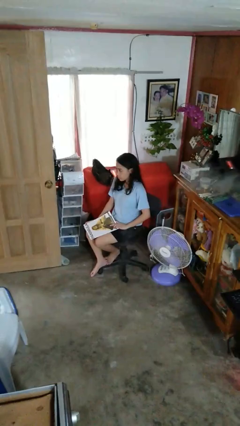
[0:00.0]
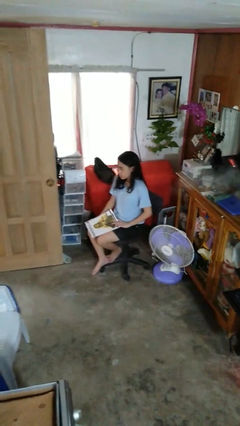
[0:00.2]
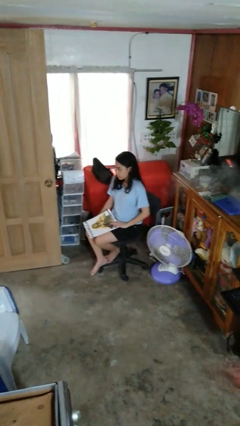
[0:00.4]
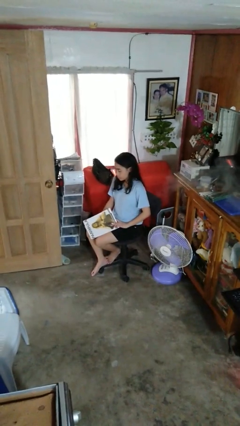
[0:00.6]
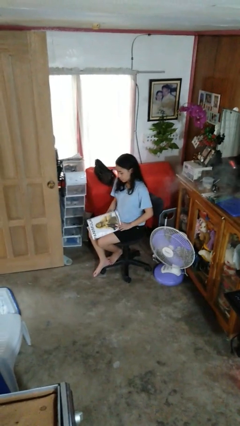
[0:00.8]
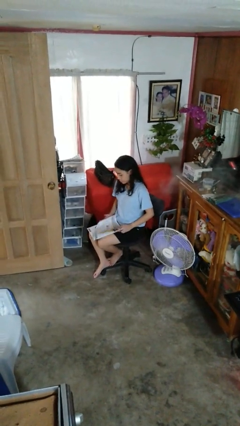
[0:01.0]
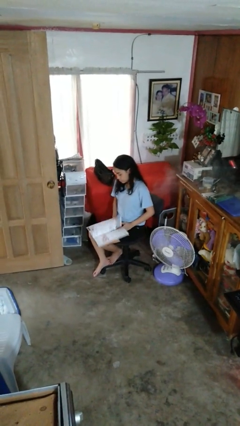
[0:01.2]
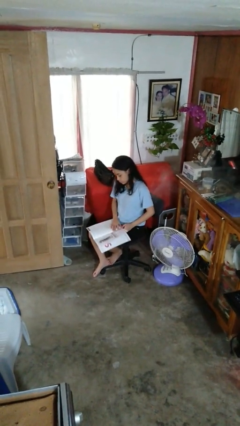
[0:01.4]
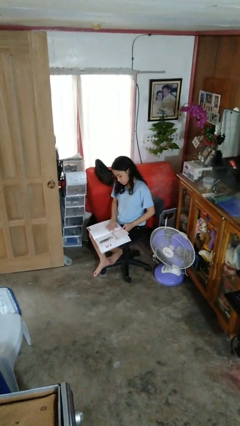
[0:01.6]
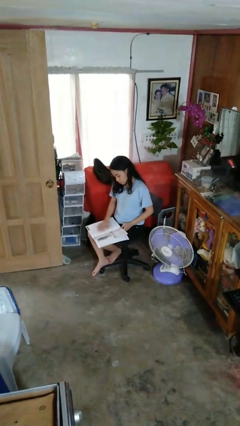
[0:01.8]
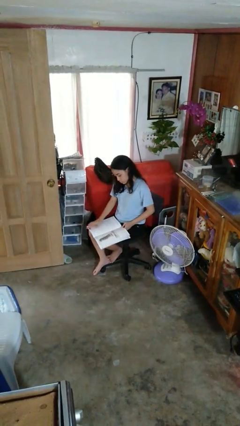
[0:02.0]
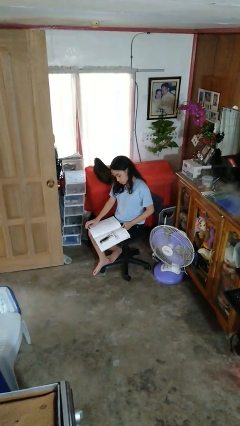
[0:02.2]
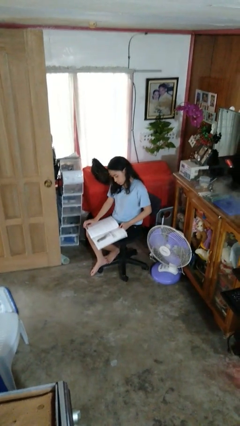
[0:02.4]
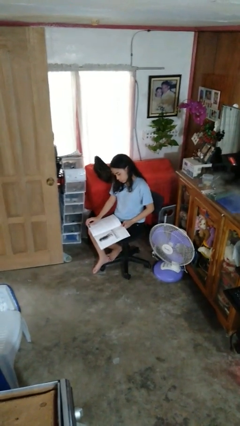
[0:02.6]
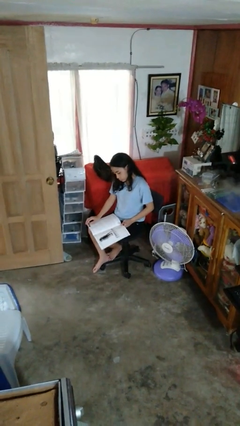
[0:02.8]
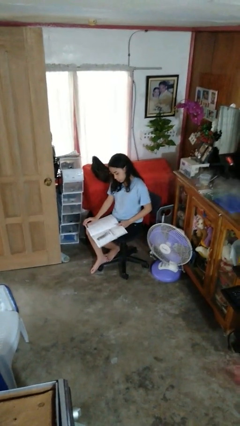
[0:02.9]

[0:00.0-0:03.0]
person reads magazine

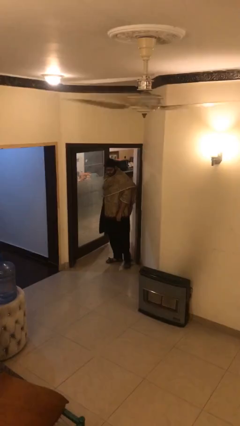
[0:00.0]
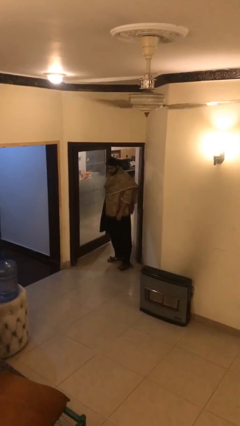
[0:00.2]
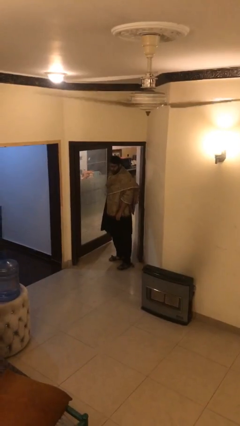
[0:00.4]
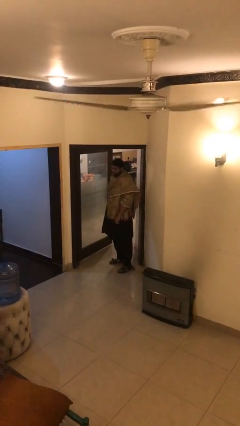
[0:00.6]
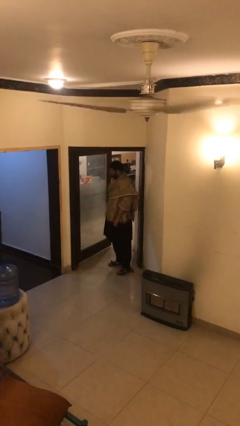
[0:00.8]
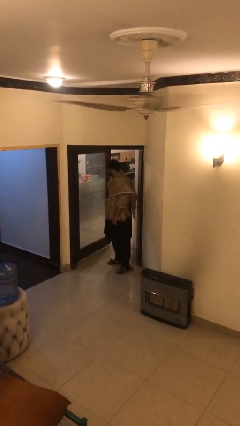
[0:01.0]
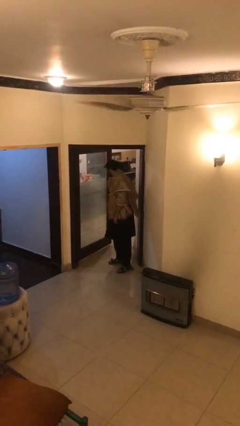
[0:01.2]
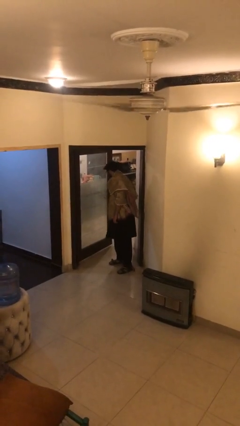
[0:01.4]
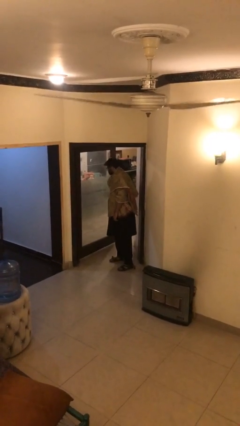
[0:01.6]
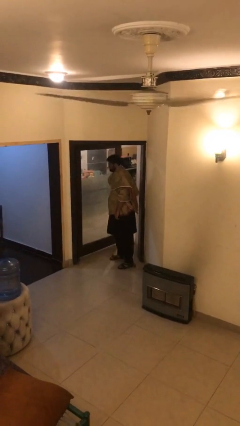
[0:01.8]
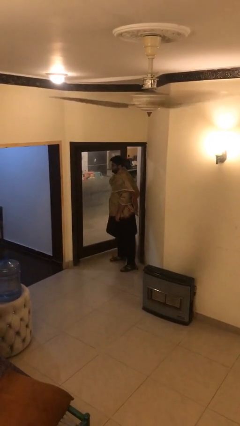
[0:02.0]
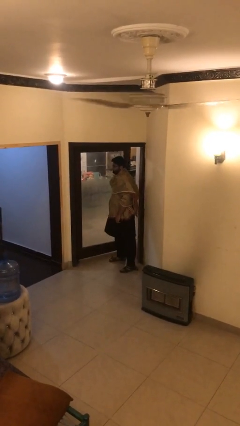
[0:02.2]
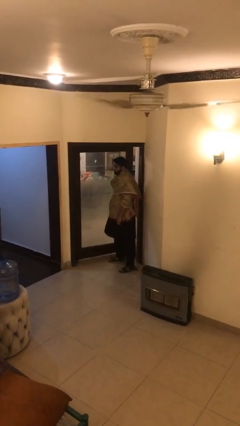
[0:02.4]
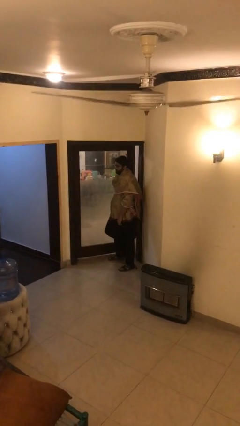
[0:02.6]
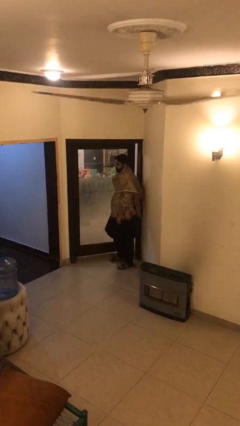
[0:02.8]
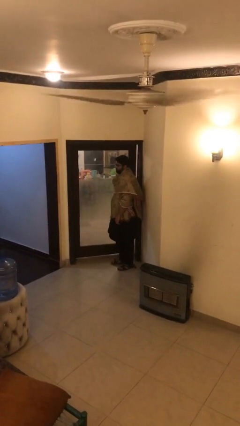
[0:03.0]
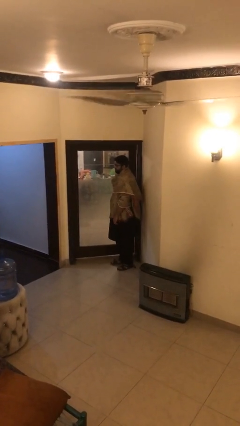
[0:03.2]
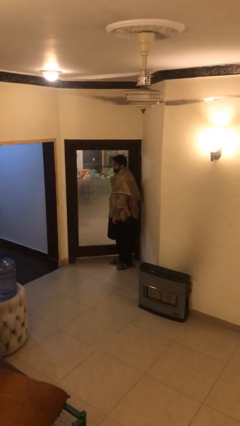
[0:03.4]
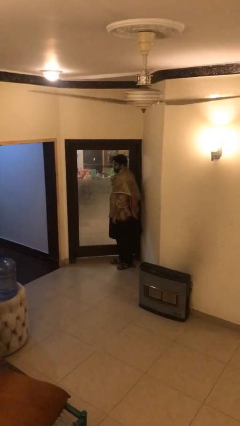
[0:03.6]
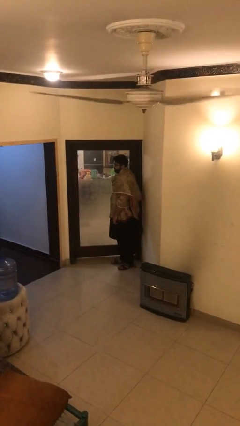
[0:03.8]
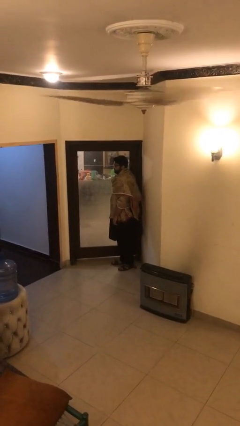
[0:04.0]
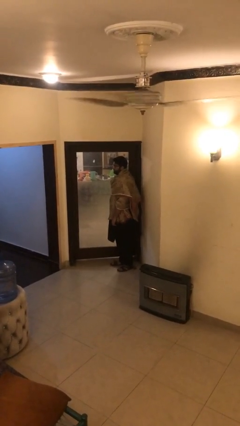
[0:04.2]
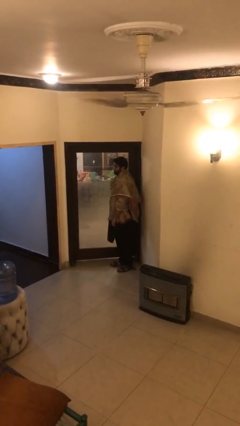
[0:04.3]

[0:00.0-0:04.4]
person closes facility door

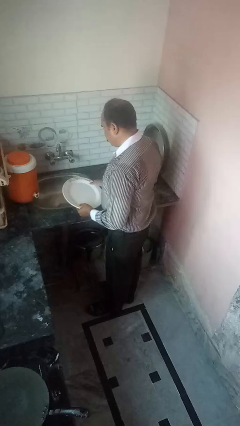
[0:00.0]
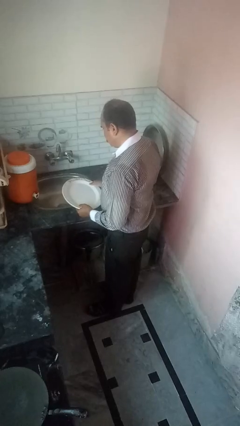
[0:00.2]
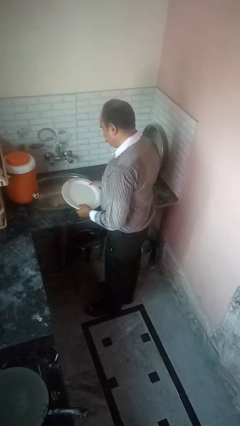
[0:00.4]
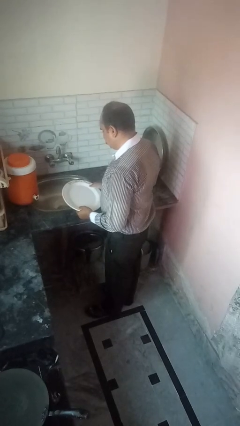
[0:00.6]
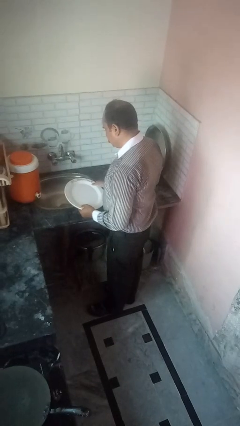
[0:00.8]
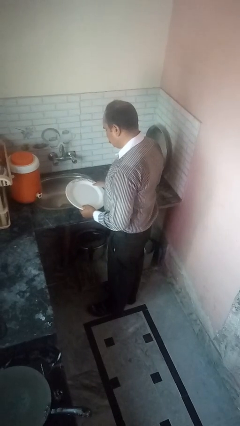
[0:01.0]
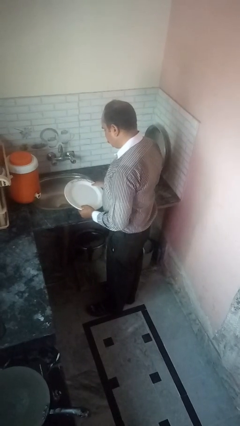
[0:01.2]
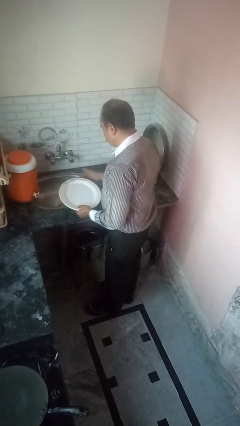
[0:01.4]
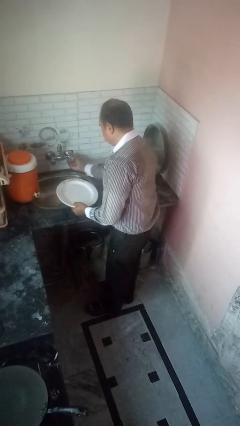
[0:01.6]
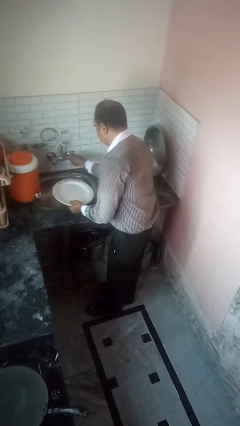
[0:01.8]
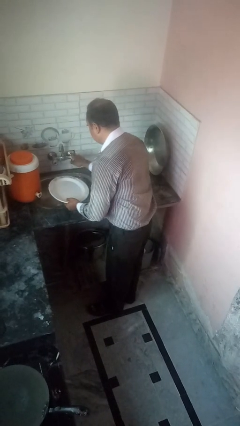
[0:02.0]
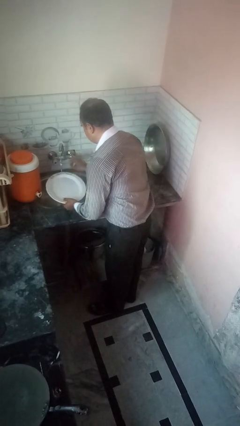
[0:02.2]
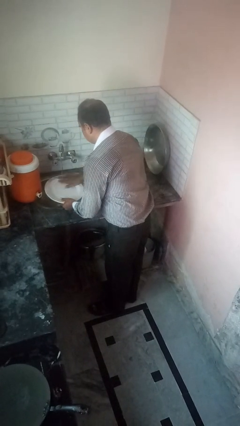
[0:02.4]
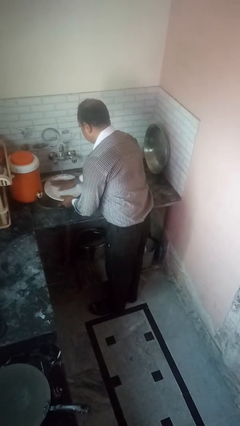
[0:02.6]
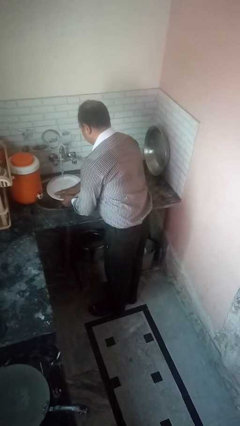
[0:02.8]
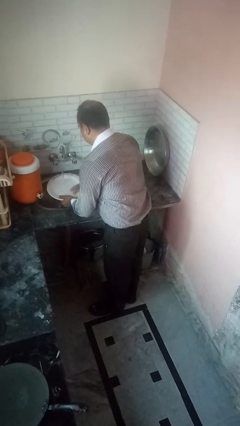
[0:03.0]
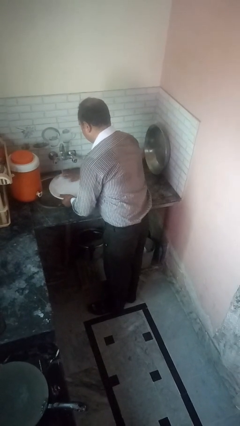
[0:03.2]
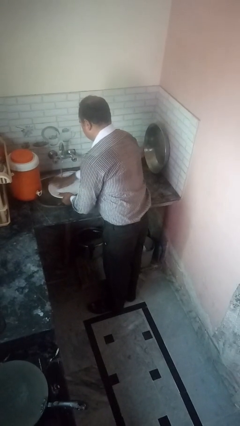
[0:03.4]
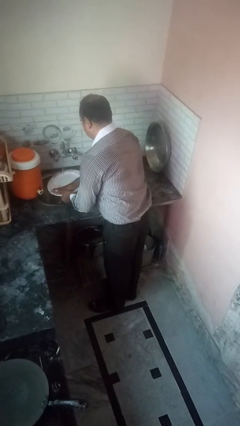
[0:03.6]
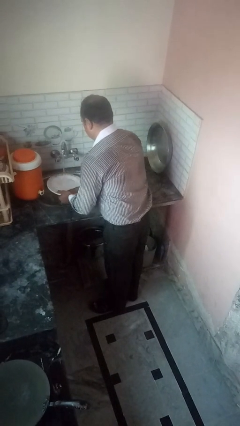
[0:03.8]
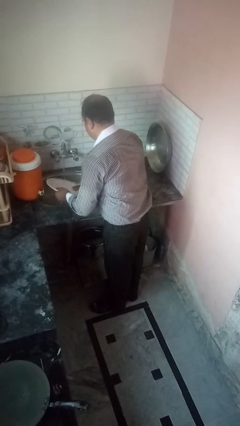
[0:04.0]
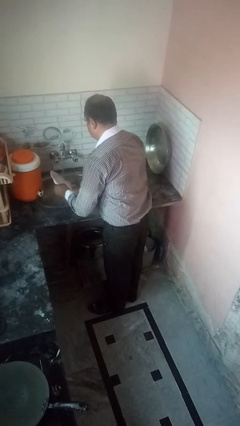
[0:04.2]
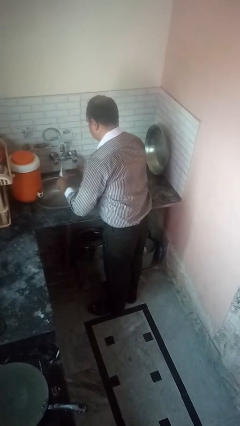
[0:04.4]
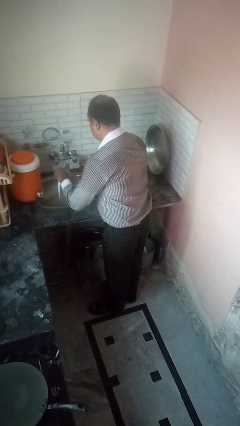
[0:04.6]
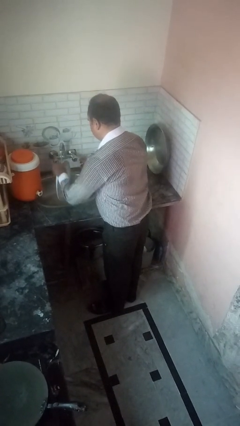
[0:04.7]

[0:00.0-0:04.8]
person washes dish

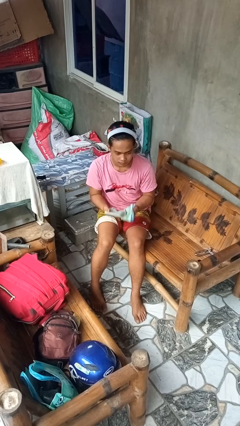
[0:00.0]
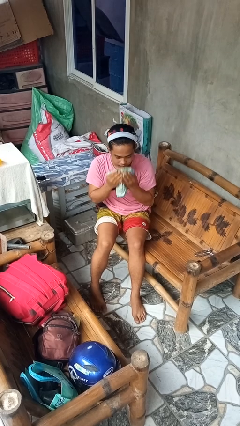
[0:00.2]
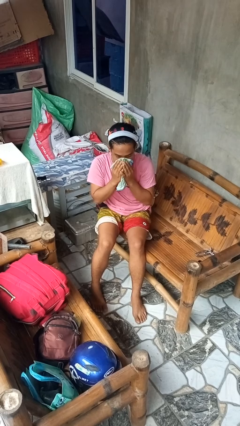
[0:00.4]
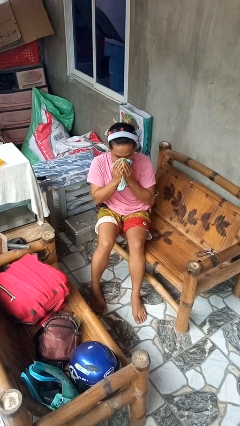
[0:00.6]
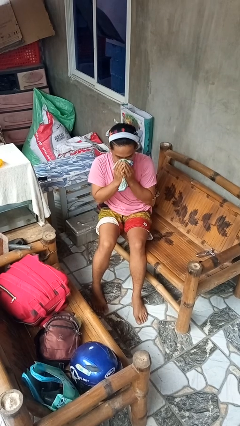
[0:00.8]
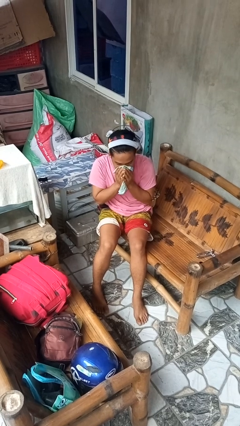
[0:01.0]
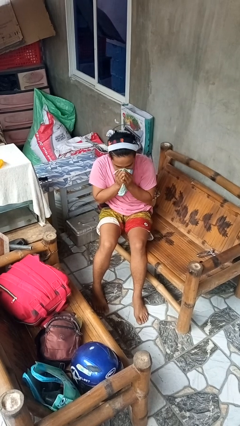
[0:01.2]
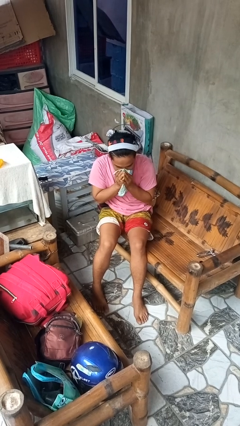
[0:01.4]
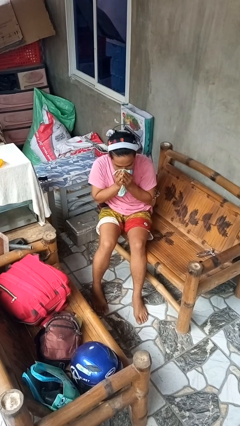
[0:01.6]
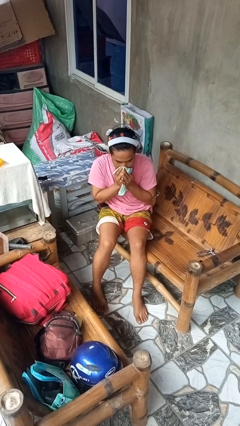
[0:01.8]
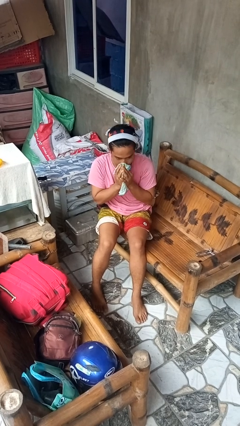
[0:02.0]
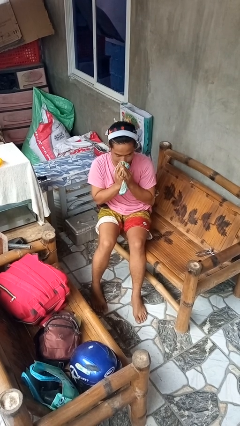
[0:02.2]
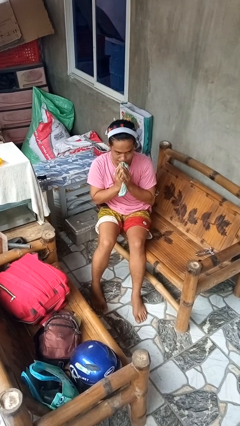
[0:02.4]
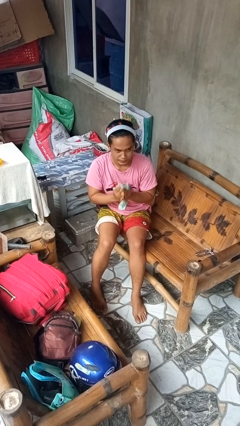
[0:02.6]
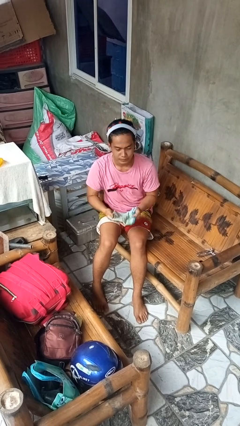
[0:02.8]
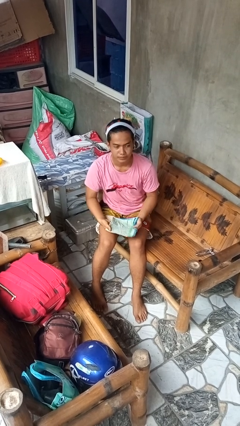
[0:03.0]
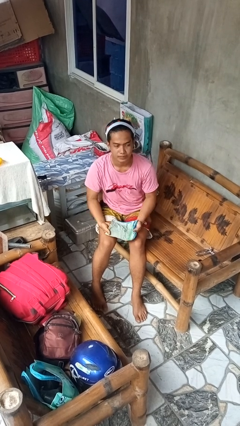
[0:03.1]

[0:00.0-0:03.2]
person blows nose

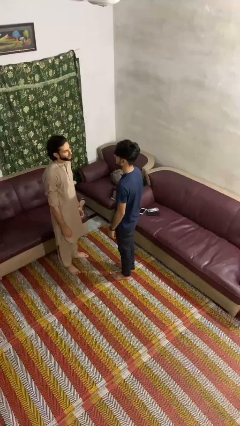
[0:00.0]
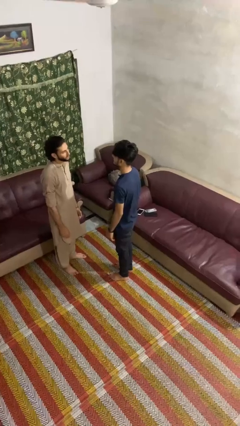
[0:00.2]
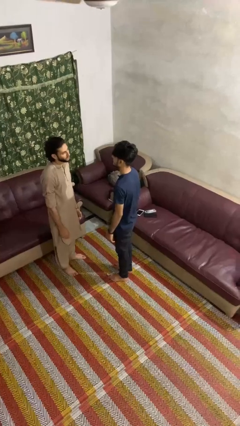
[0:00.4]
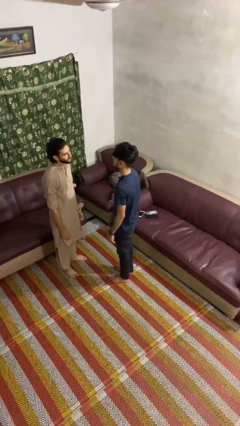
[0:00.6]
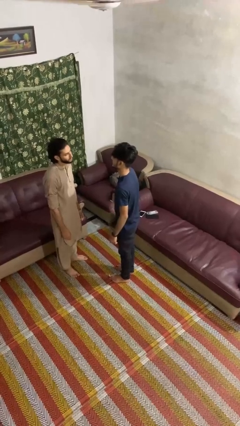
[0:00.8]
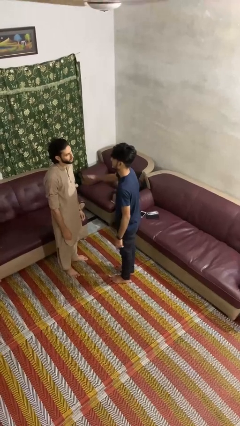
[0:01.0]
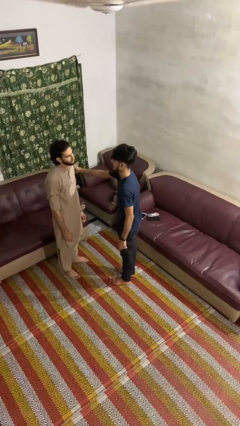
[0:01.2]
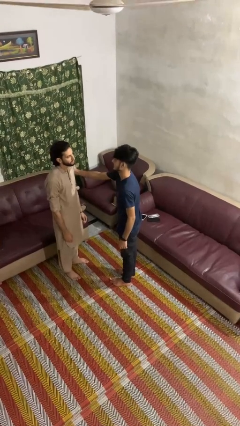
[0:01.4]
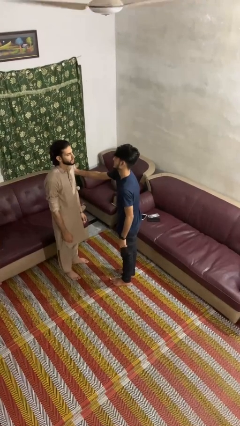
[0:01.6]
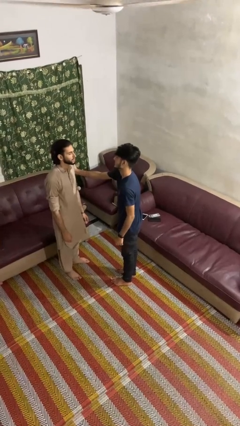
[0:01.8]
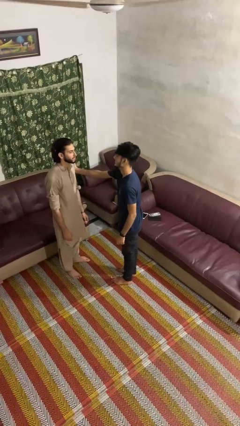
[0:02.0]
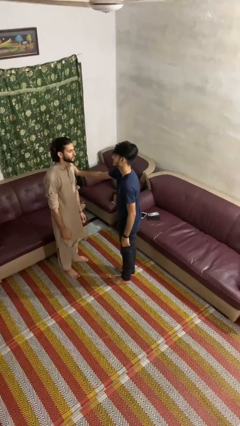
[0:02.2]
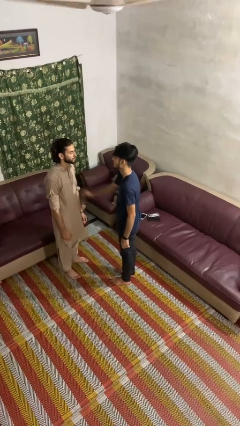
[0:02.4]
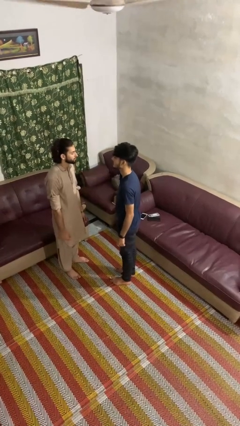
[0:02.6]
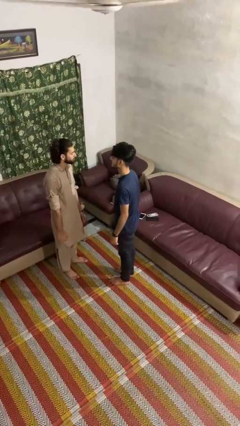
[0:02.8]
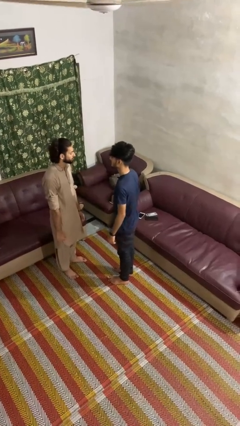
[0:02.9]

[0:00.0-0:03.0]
person grabs person by bicep
